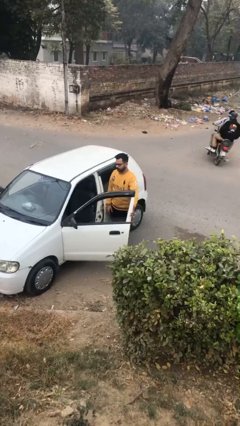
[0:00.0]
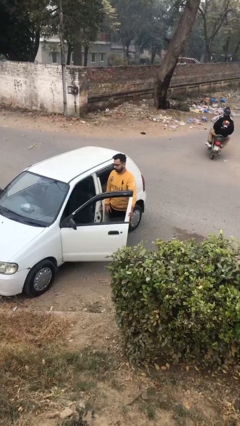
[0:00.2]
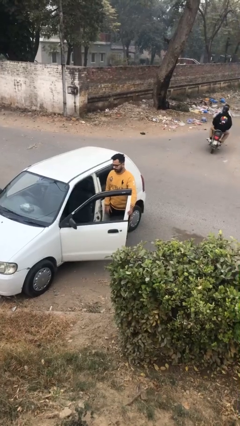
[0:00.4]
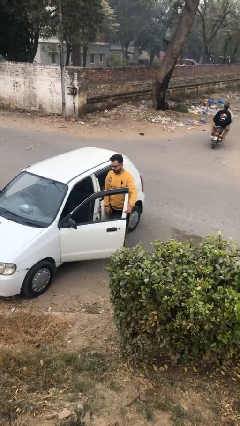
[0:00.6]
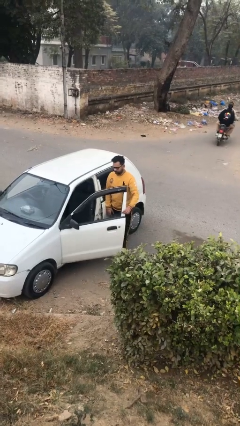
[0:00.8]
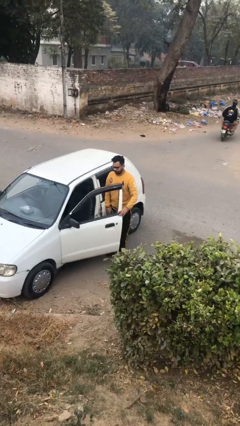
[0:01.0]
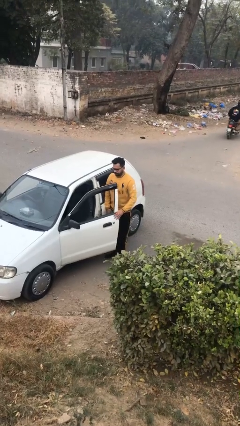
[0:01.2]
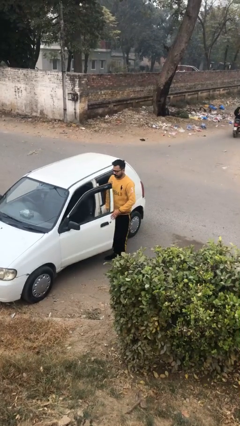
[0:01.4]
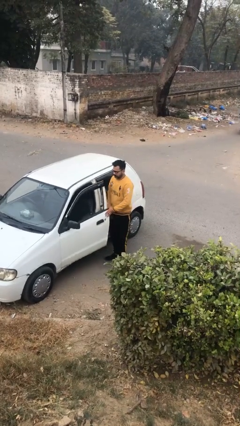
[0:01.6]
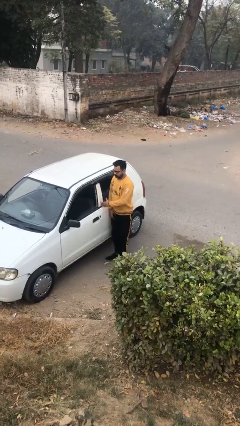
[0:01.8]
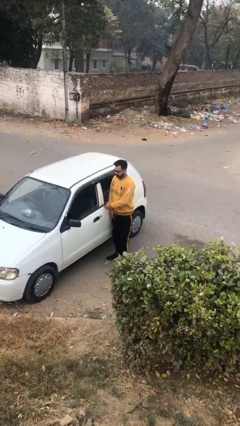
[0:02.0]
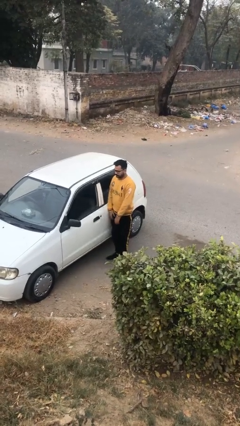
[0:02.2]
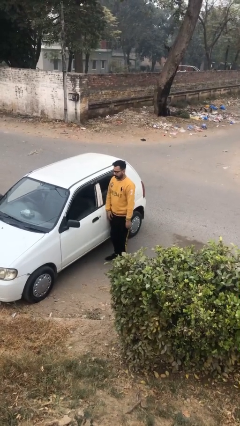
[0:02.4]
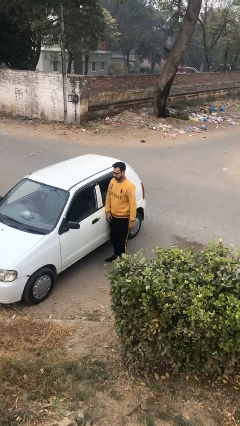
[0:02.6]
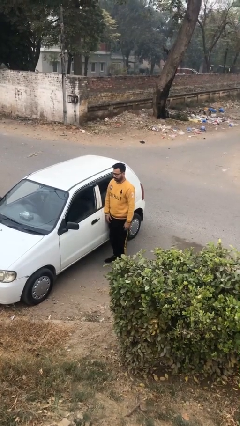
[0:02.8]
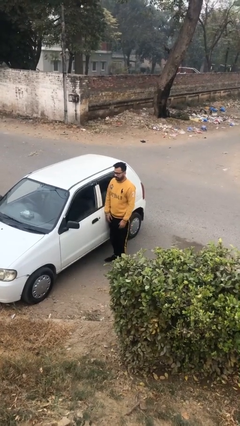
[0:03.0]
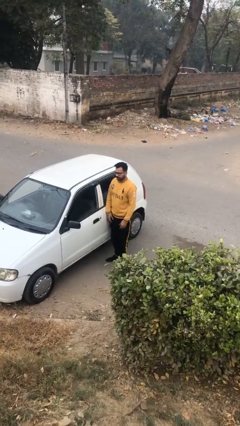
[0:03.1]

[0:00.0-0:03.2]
person closes car door

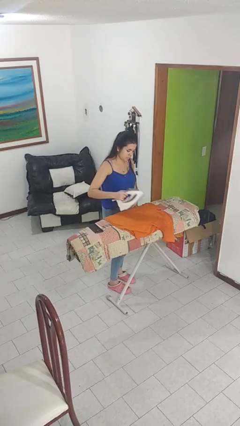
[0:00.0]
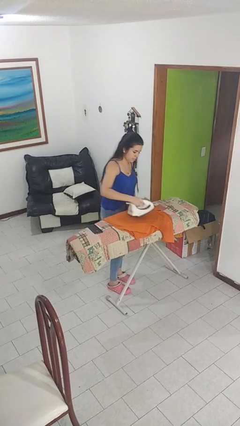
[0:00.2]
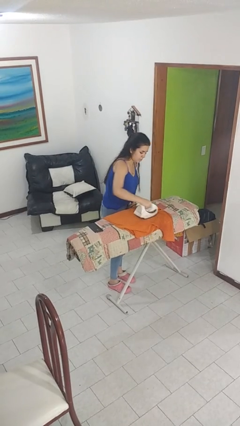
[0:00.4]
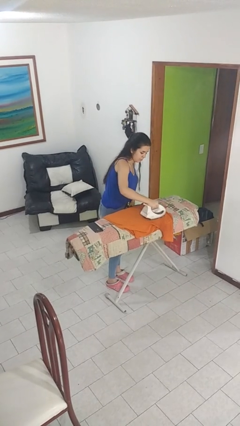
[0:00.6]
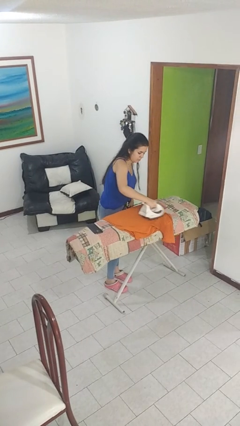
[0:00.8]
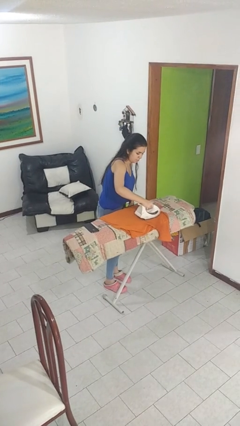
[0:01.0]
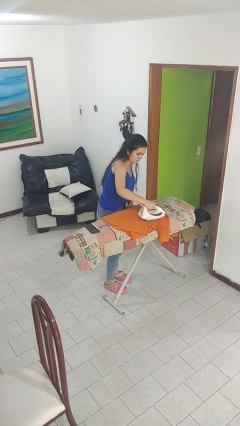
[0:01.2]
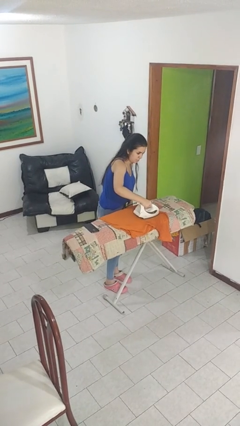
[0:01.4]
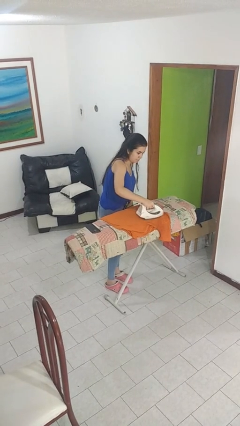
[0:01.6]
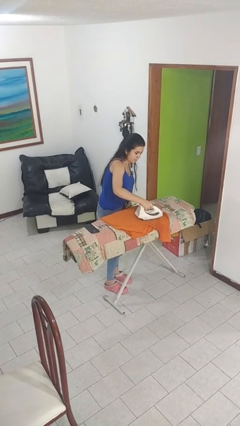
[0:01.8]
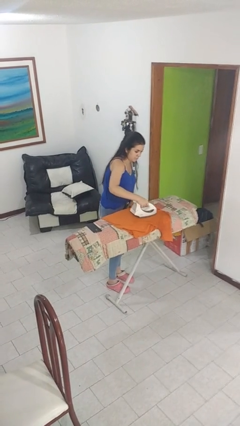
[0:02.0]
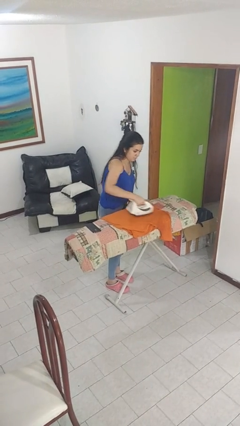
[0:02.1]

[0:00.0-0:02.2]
person irons clothes

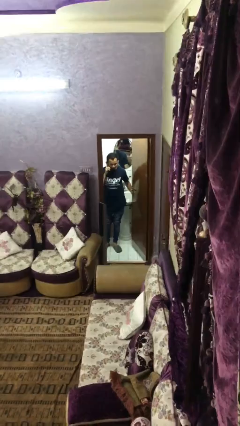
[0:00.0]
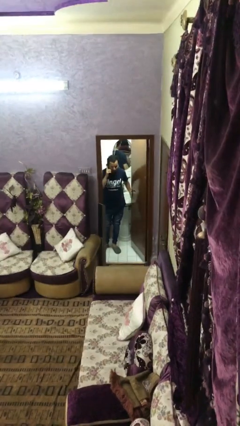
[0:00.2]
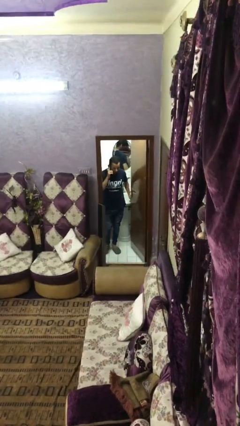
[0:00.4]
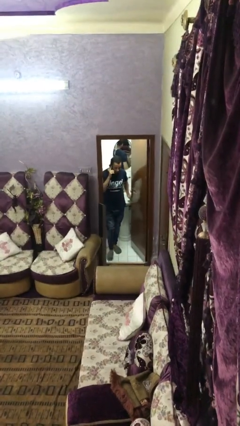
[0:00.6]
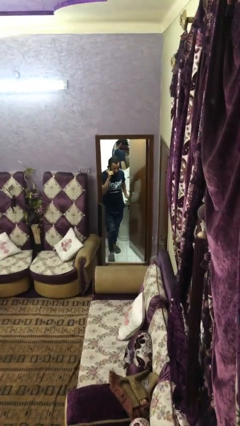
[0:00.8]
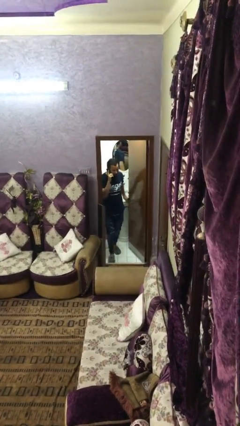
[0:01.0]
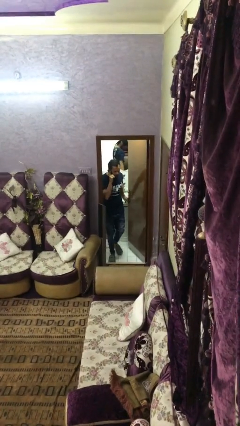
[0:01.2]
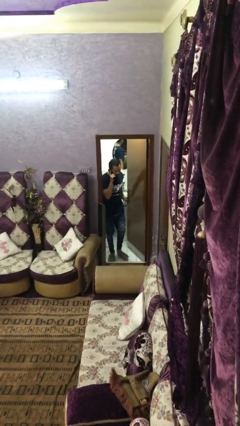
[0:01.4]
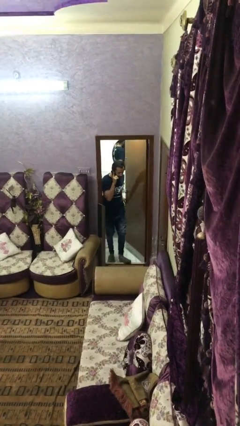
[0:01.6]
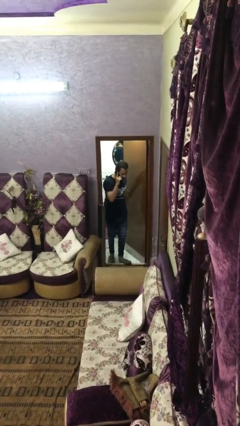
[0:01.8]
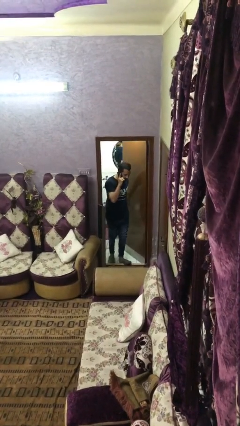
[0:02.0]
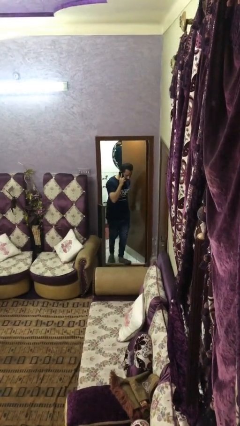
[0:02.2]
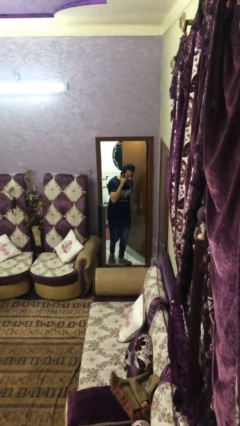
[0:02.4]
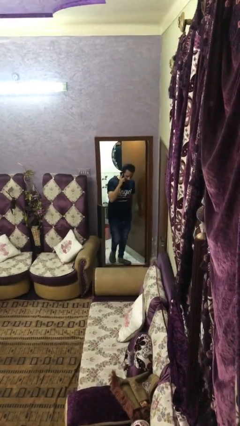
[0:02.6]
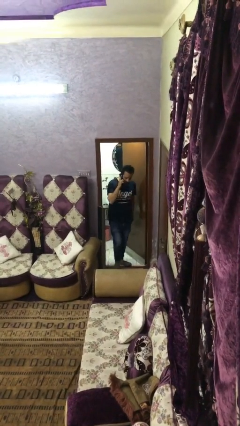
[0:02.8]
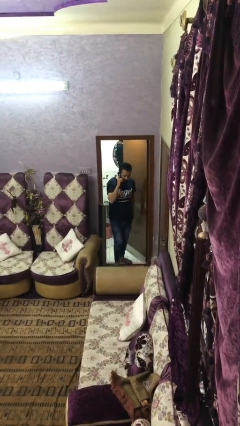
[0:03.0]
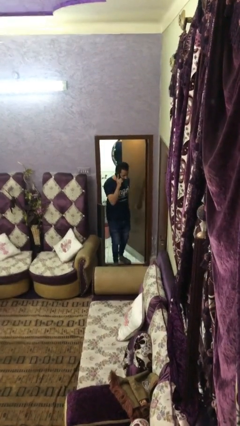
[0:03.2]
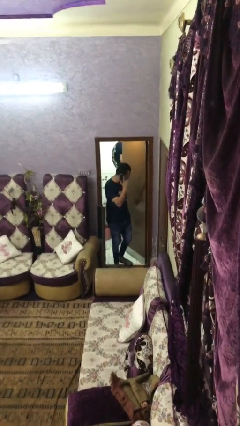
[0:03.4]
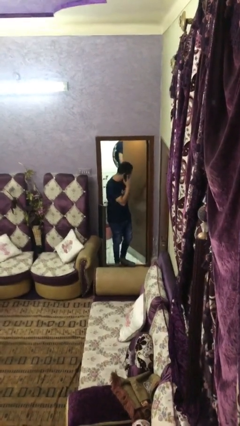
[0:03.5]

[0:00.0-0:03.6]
person enters scene through structure

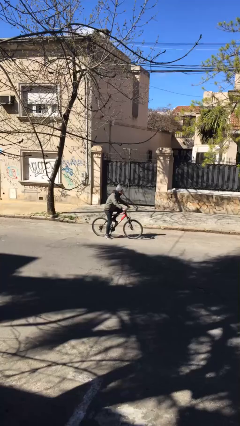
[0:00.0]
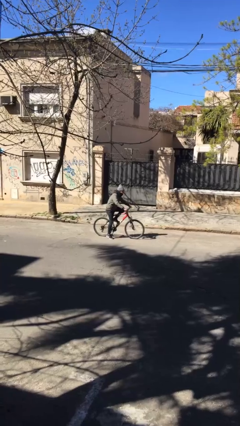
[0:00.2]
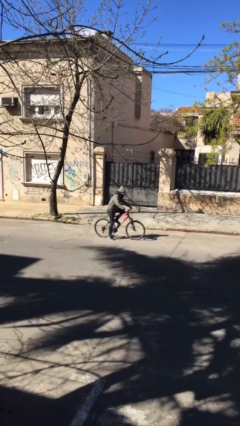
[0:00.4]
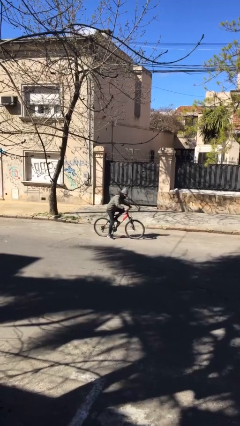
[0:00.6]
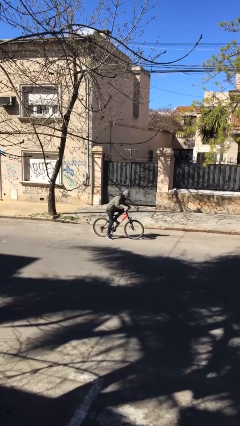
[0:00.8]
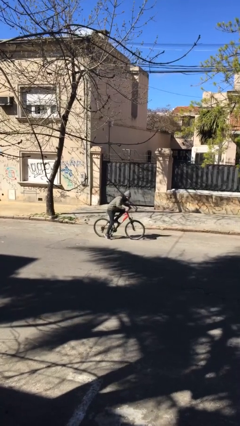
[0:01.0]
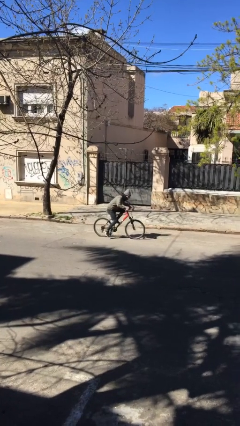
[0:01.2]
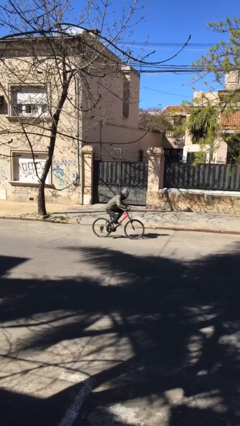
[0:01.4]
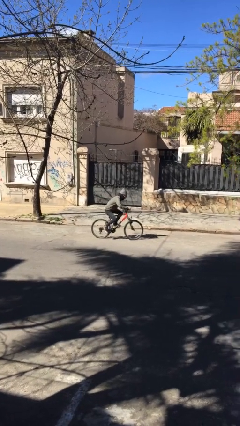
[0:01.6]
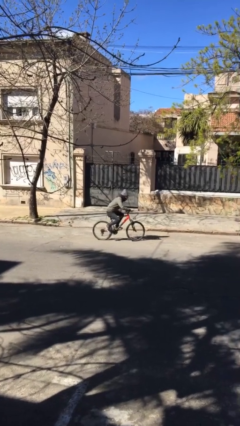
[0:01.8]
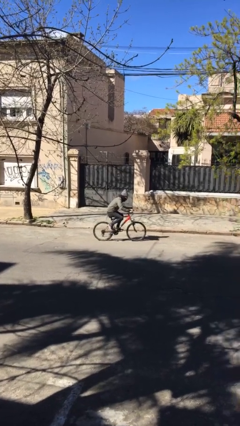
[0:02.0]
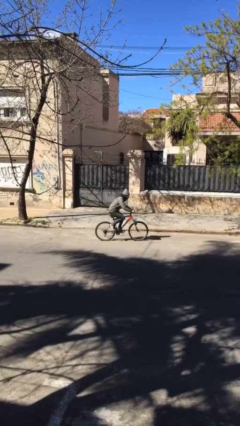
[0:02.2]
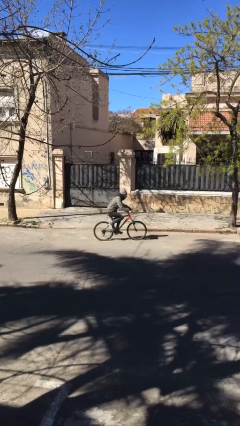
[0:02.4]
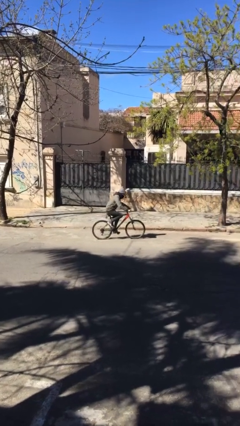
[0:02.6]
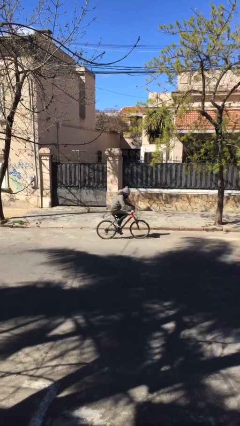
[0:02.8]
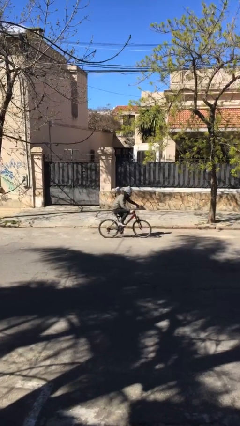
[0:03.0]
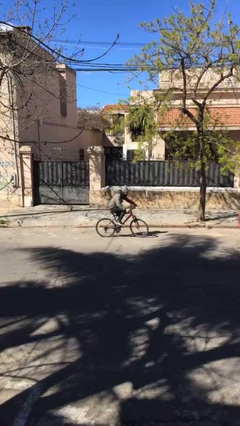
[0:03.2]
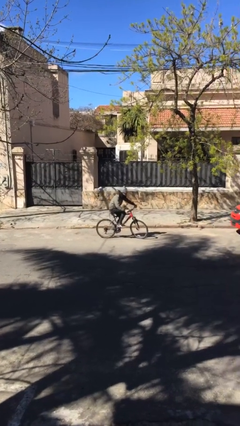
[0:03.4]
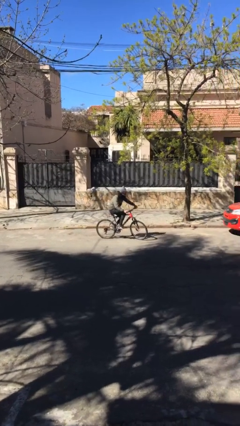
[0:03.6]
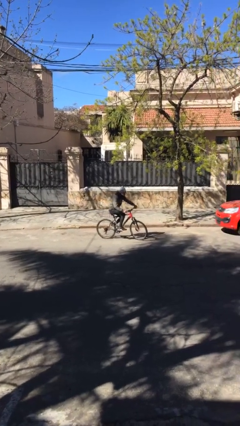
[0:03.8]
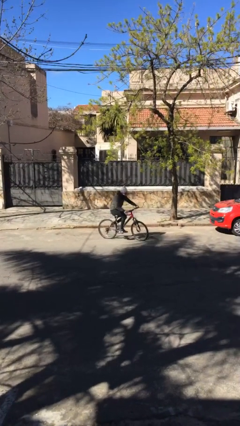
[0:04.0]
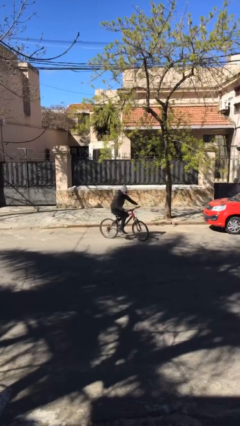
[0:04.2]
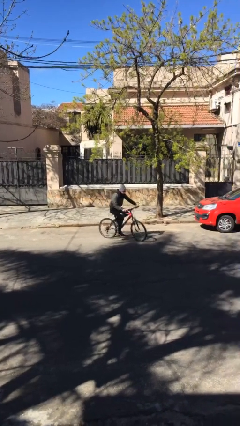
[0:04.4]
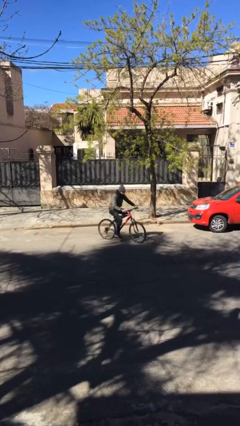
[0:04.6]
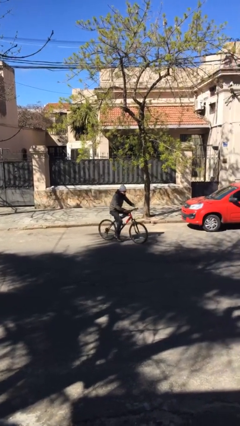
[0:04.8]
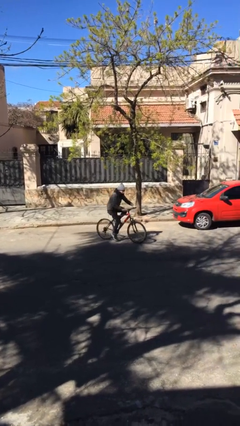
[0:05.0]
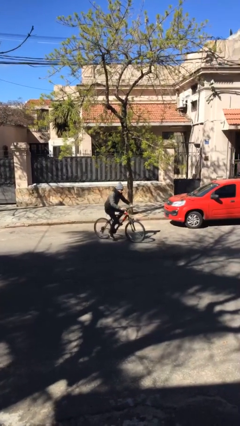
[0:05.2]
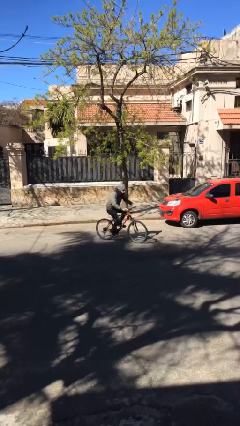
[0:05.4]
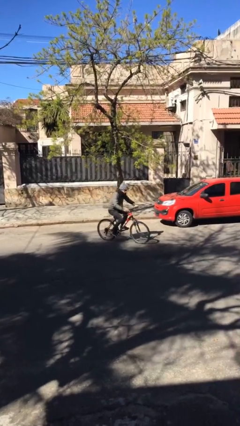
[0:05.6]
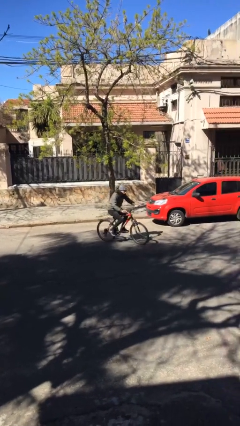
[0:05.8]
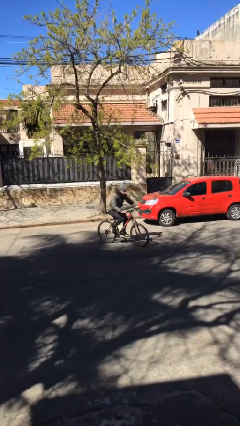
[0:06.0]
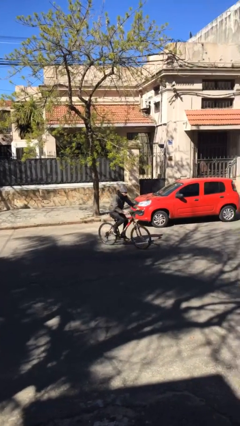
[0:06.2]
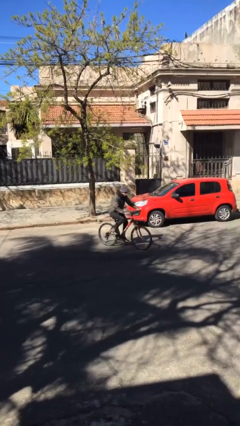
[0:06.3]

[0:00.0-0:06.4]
person rides bicycle

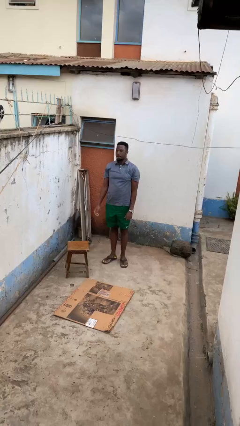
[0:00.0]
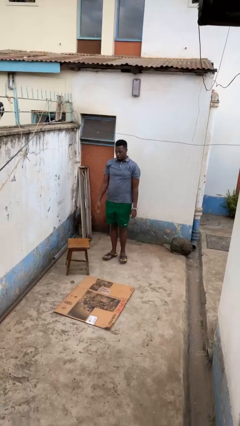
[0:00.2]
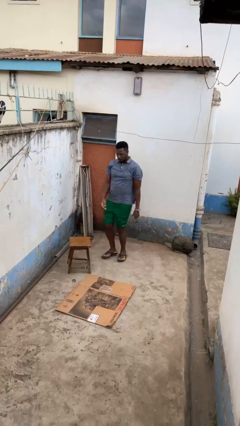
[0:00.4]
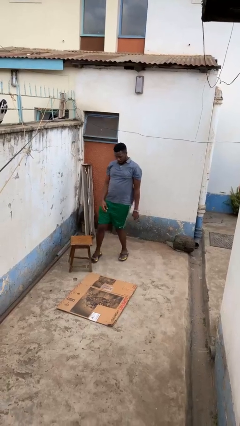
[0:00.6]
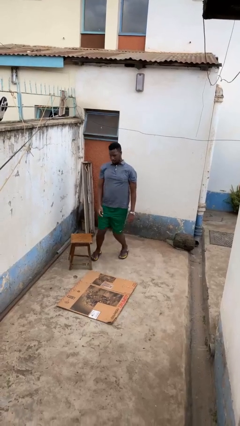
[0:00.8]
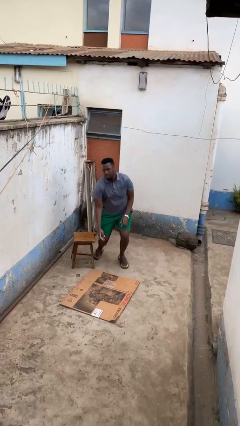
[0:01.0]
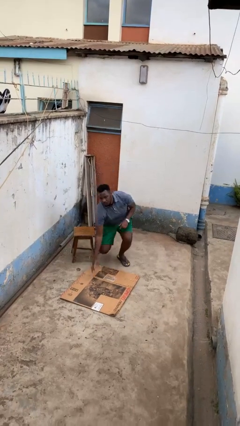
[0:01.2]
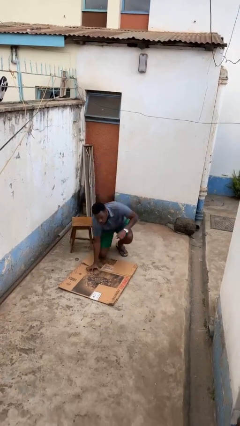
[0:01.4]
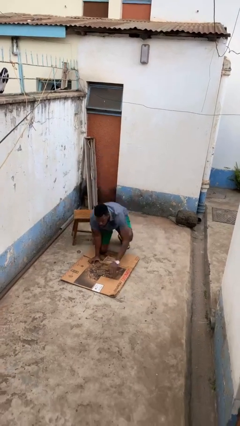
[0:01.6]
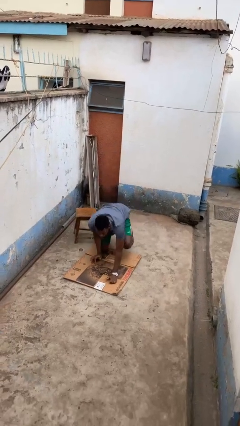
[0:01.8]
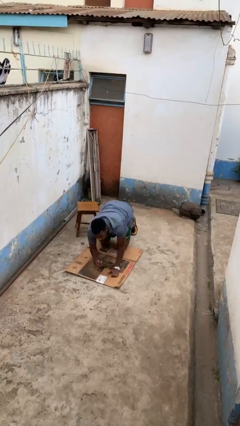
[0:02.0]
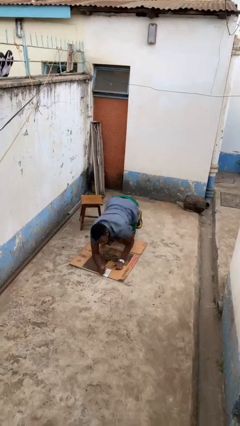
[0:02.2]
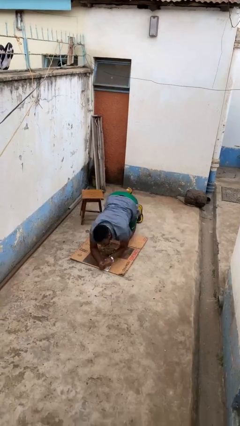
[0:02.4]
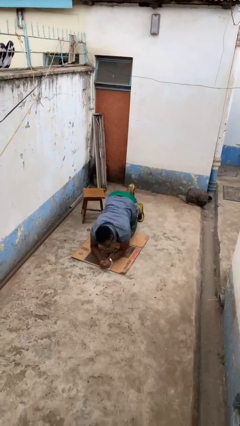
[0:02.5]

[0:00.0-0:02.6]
person trips on object on floor
